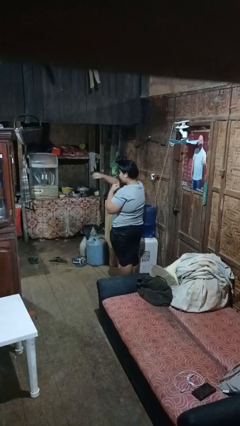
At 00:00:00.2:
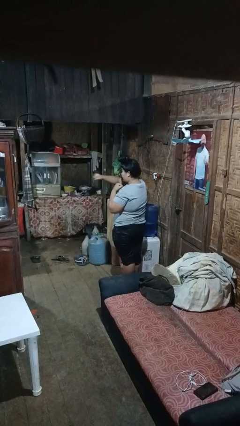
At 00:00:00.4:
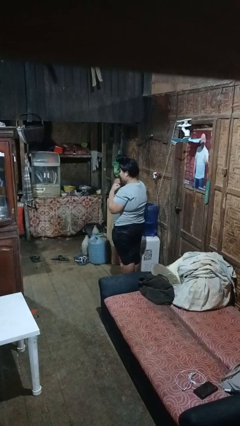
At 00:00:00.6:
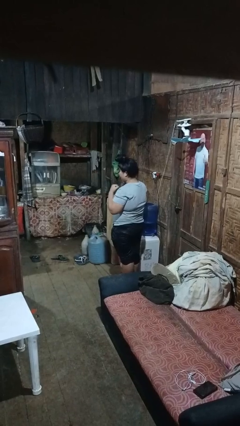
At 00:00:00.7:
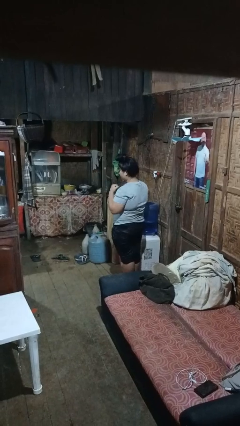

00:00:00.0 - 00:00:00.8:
person punches

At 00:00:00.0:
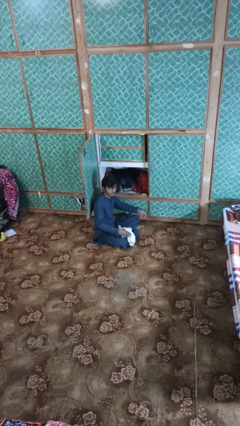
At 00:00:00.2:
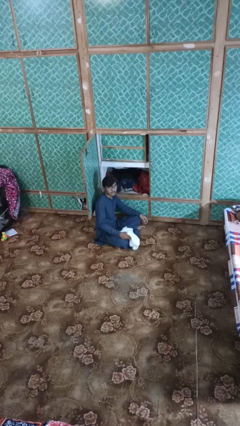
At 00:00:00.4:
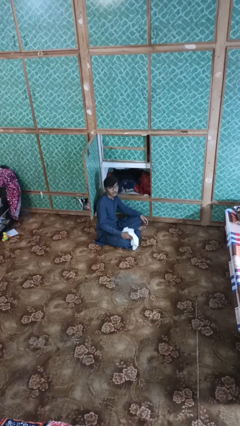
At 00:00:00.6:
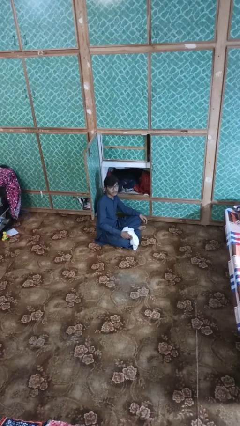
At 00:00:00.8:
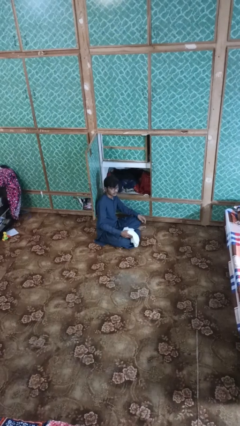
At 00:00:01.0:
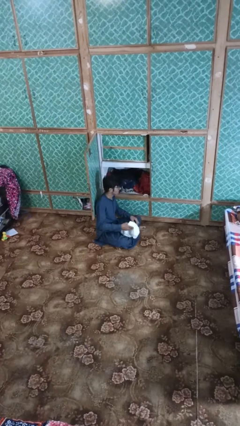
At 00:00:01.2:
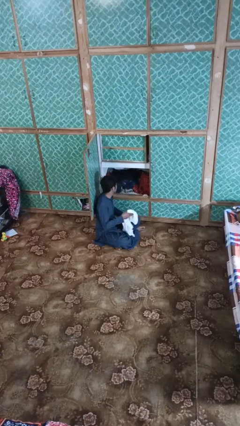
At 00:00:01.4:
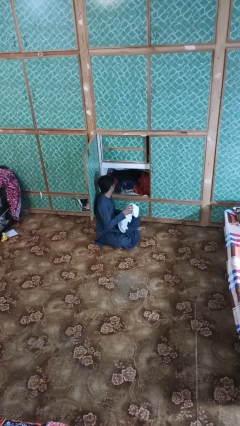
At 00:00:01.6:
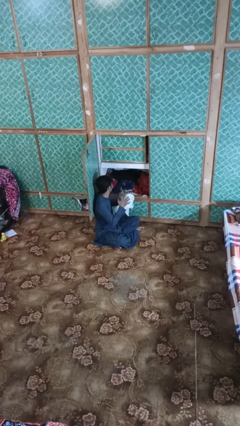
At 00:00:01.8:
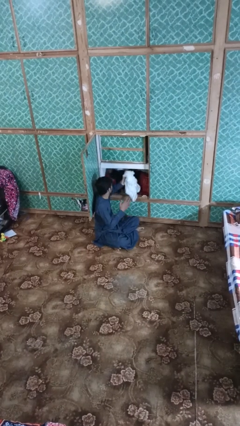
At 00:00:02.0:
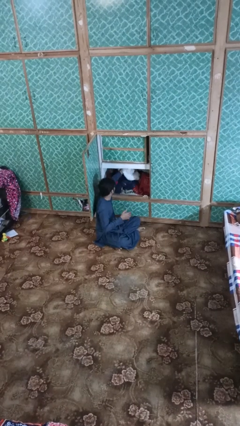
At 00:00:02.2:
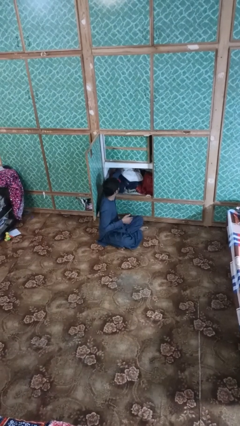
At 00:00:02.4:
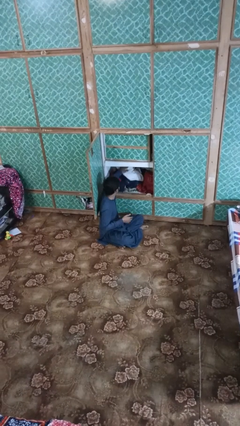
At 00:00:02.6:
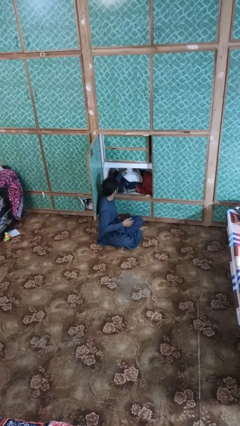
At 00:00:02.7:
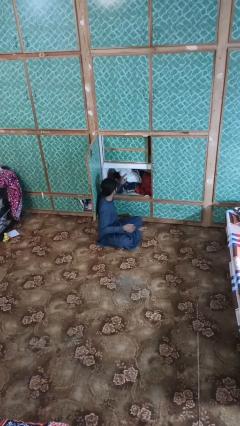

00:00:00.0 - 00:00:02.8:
person puts clothes into dresser

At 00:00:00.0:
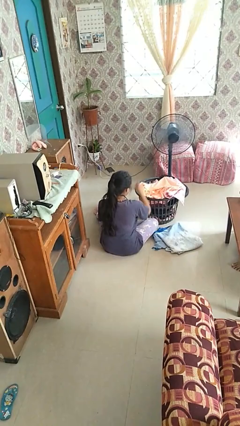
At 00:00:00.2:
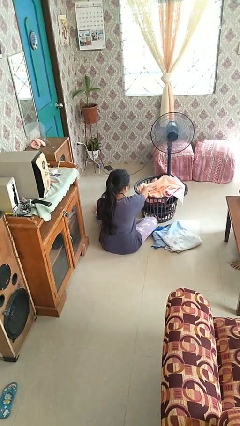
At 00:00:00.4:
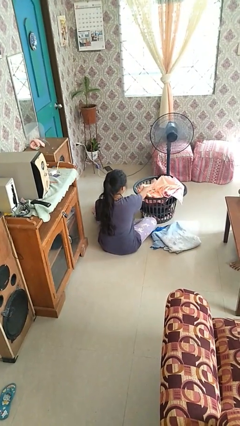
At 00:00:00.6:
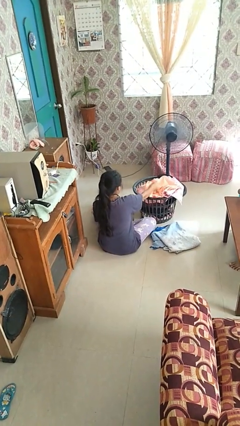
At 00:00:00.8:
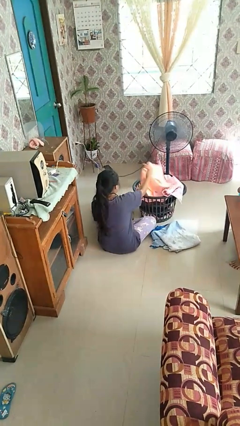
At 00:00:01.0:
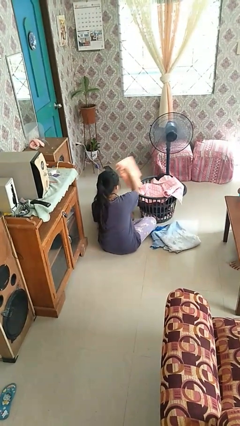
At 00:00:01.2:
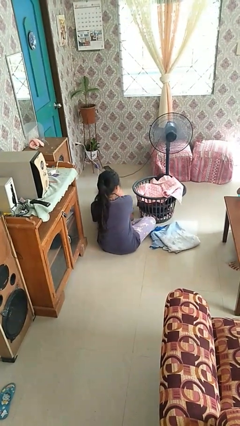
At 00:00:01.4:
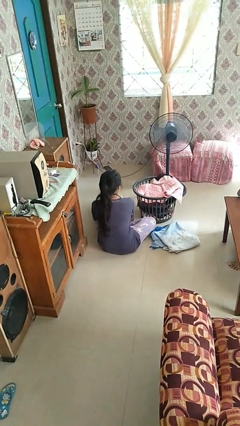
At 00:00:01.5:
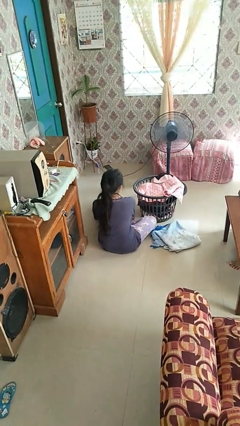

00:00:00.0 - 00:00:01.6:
person takes object from basket

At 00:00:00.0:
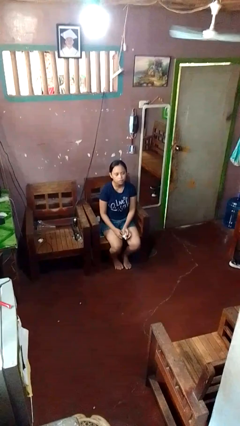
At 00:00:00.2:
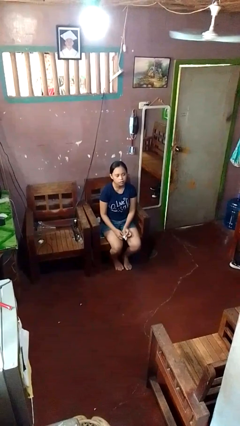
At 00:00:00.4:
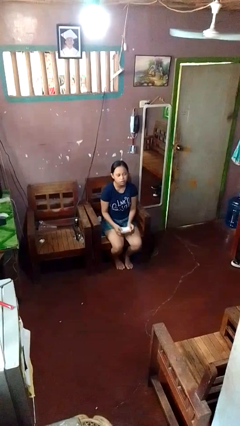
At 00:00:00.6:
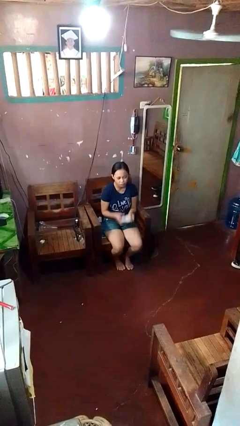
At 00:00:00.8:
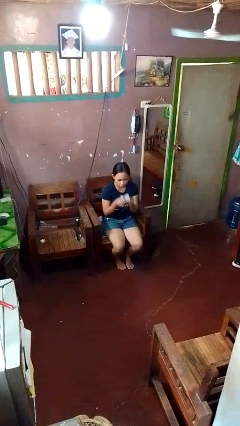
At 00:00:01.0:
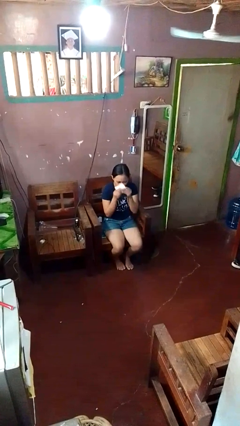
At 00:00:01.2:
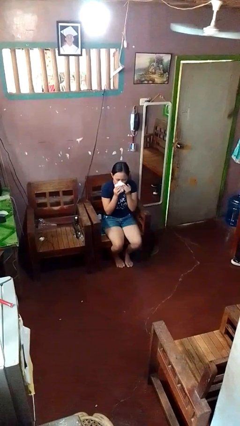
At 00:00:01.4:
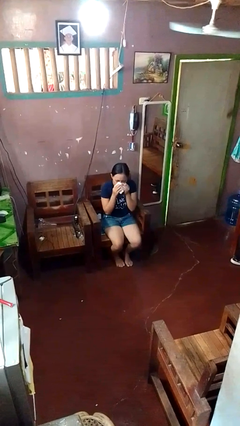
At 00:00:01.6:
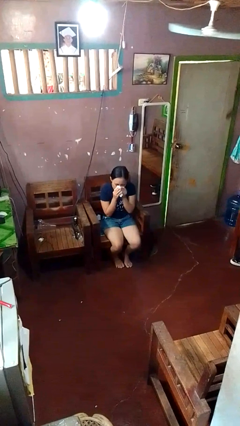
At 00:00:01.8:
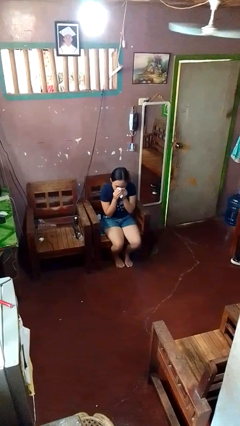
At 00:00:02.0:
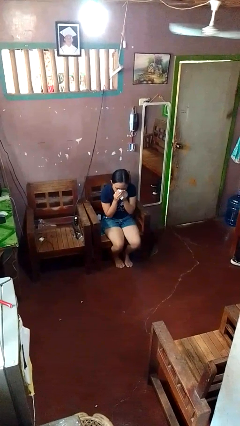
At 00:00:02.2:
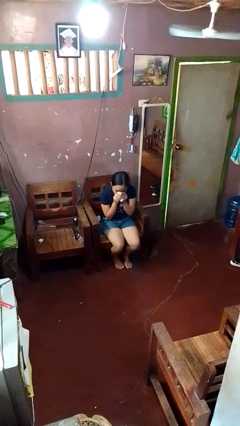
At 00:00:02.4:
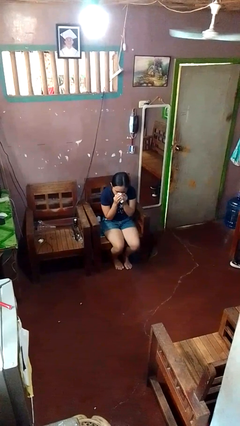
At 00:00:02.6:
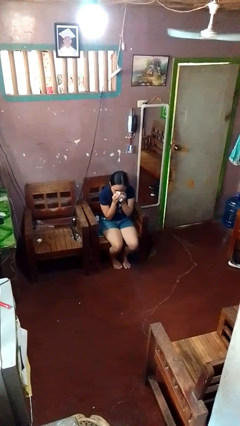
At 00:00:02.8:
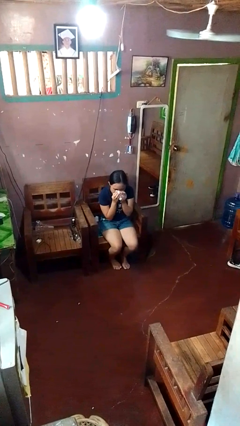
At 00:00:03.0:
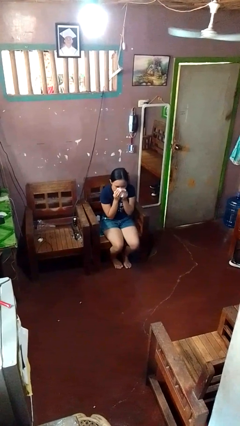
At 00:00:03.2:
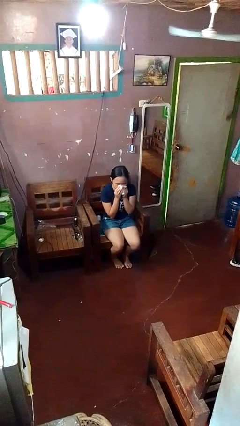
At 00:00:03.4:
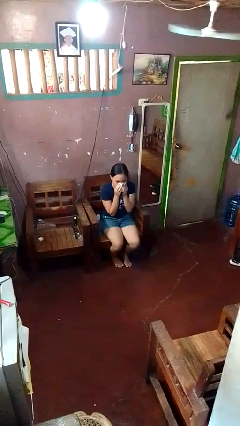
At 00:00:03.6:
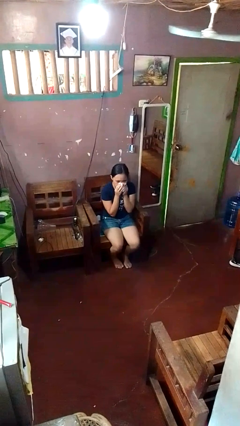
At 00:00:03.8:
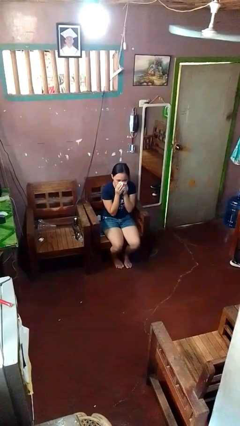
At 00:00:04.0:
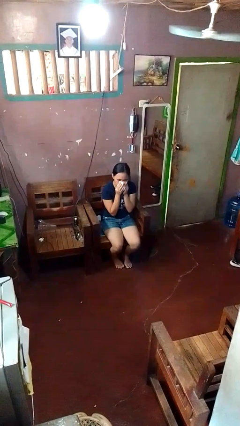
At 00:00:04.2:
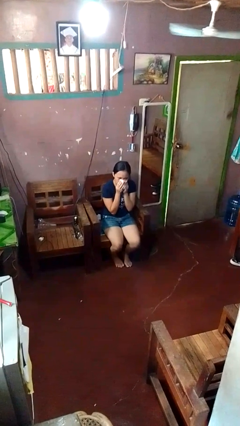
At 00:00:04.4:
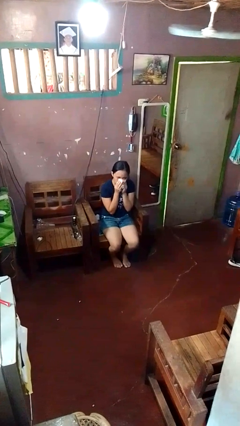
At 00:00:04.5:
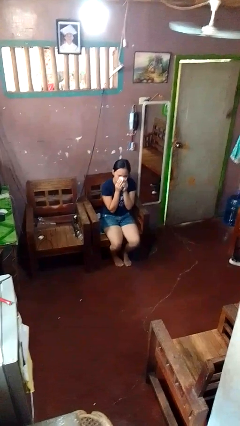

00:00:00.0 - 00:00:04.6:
person blows nose

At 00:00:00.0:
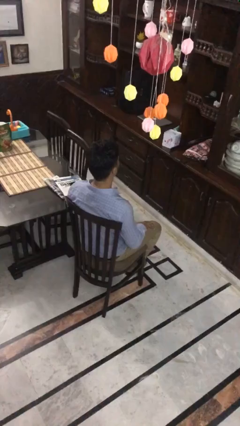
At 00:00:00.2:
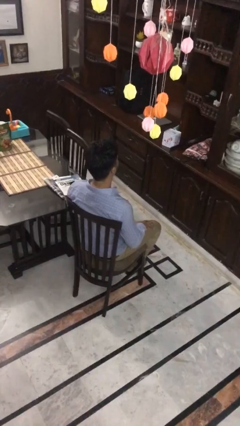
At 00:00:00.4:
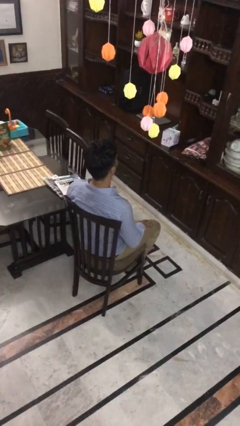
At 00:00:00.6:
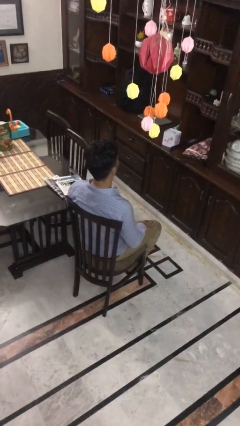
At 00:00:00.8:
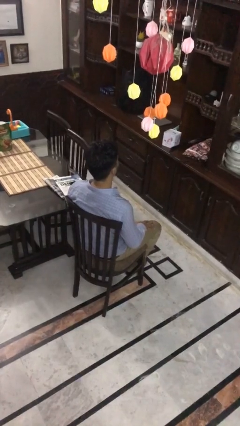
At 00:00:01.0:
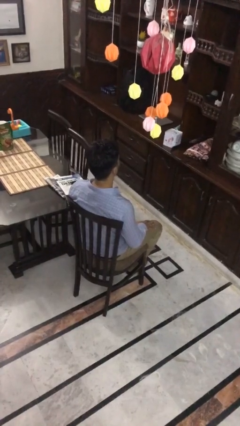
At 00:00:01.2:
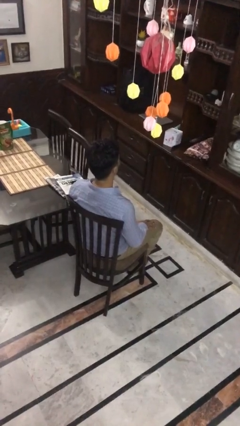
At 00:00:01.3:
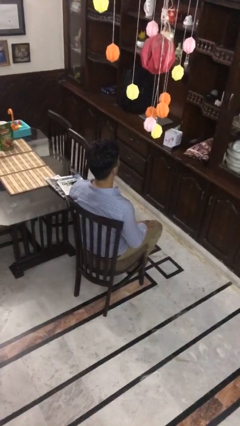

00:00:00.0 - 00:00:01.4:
person looks at hands in lap

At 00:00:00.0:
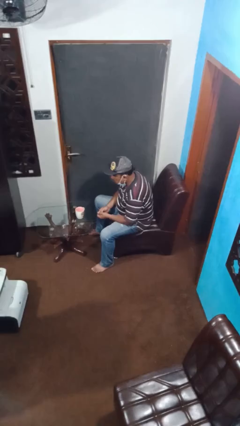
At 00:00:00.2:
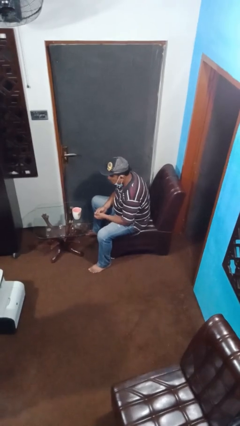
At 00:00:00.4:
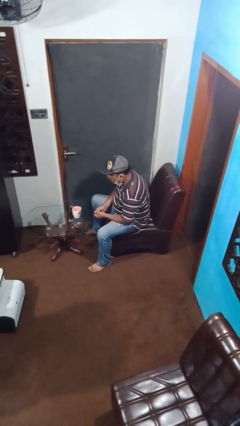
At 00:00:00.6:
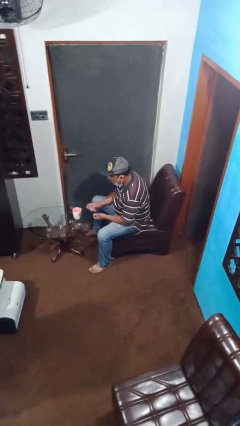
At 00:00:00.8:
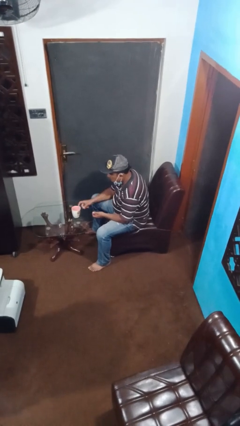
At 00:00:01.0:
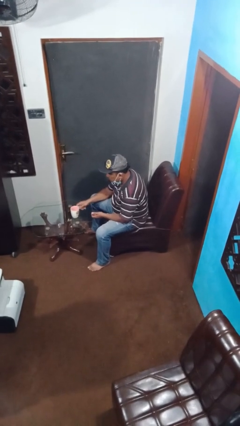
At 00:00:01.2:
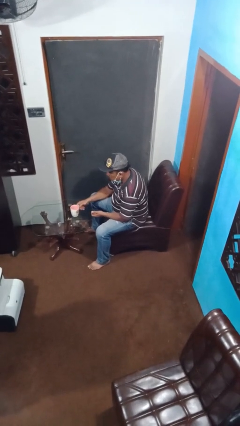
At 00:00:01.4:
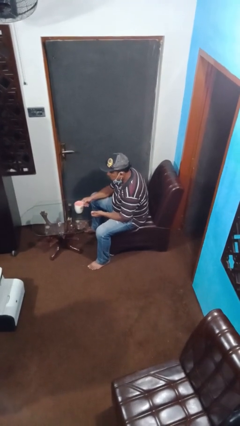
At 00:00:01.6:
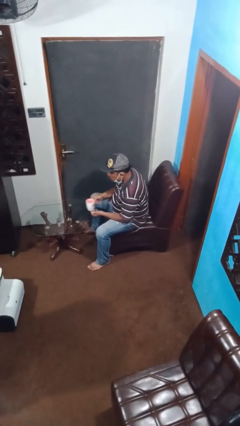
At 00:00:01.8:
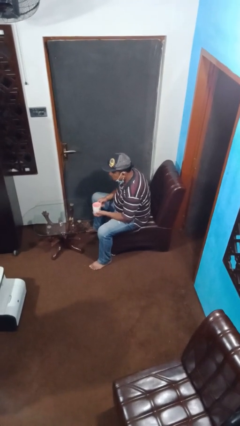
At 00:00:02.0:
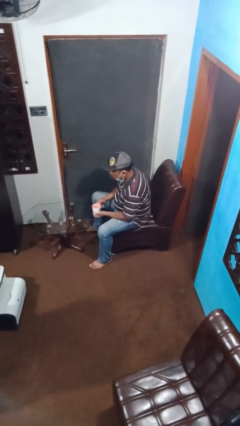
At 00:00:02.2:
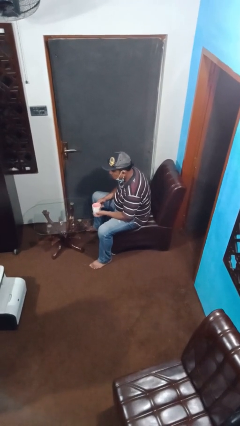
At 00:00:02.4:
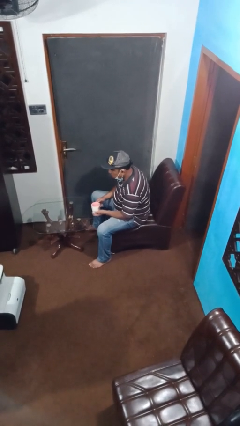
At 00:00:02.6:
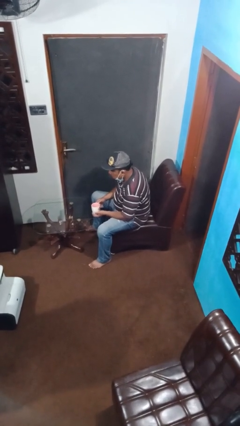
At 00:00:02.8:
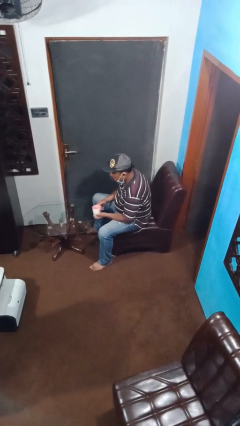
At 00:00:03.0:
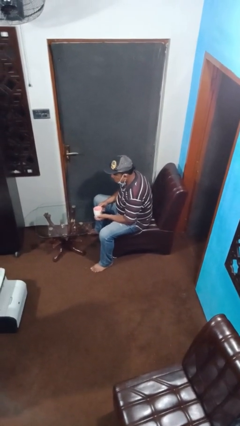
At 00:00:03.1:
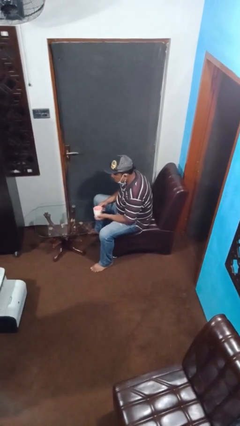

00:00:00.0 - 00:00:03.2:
person picks up object from table

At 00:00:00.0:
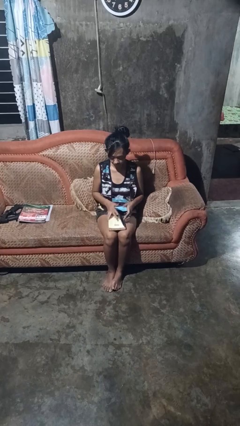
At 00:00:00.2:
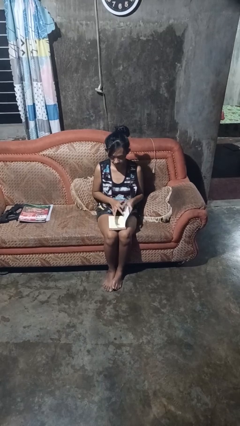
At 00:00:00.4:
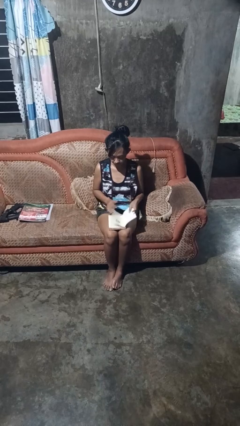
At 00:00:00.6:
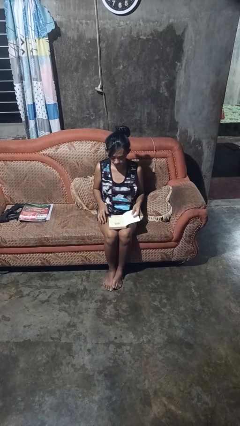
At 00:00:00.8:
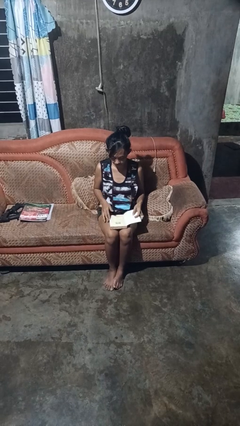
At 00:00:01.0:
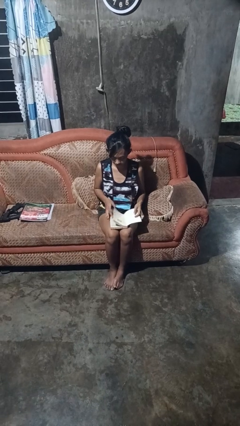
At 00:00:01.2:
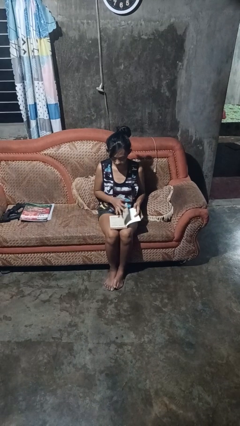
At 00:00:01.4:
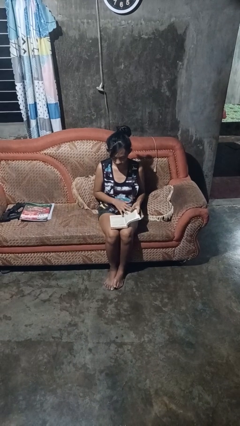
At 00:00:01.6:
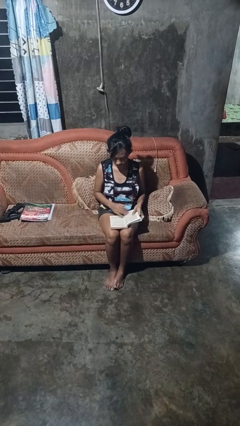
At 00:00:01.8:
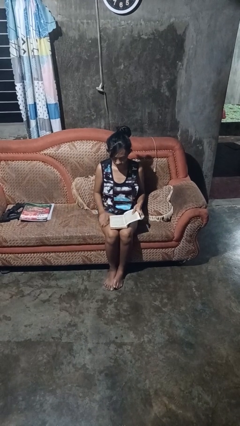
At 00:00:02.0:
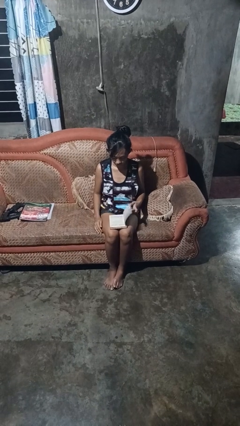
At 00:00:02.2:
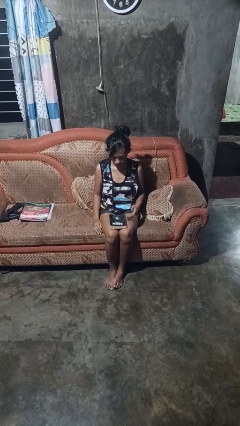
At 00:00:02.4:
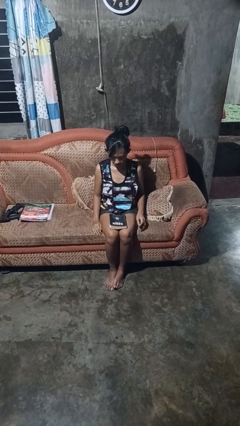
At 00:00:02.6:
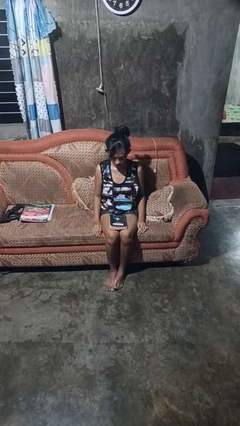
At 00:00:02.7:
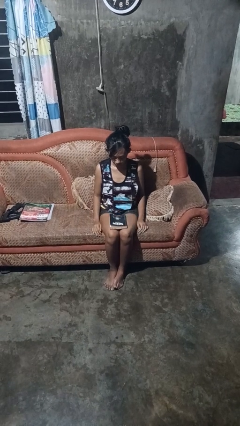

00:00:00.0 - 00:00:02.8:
person reads book
